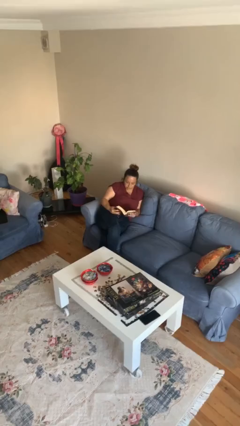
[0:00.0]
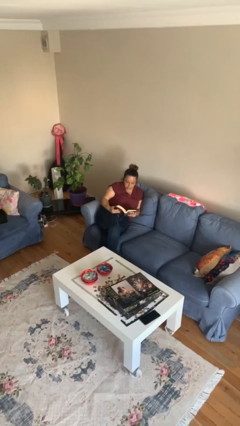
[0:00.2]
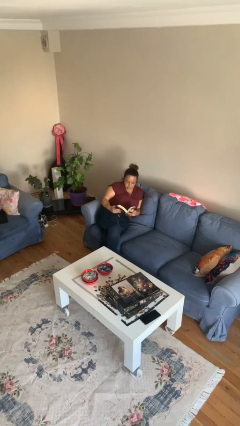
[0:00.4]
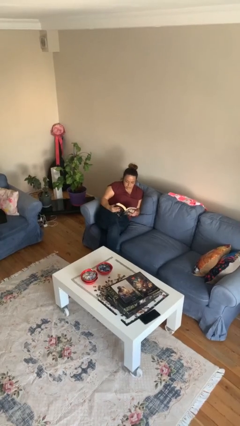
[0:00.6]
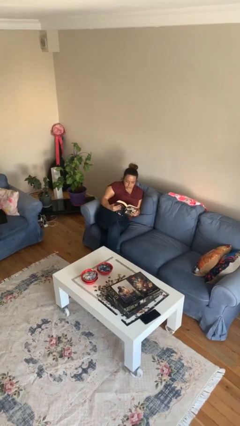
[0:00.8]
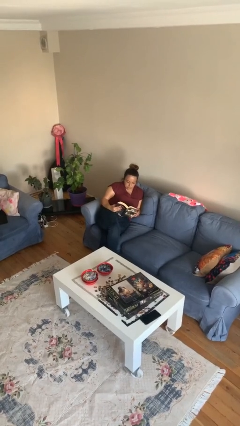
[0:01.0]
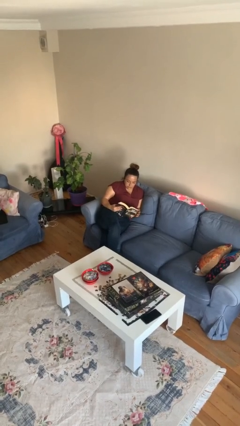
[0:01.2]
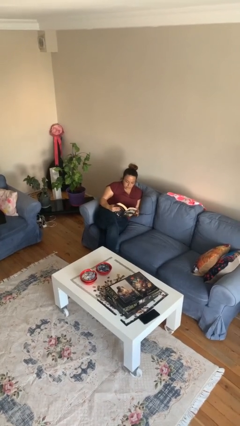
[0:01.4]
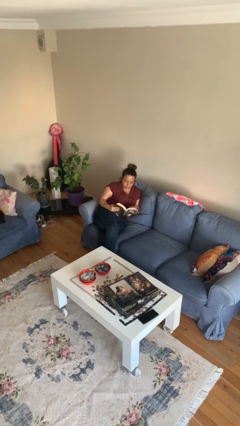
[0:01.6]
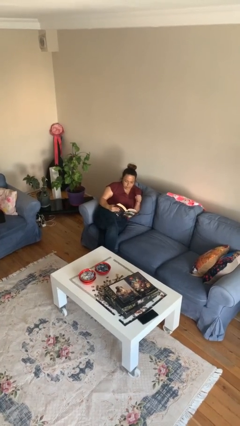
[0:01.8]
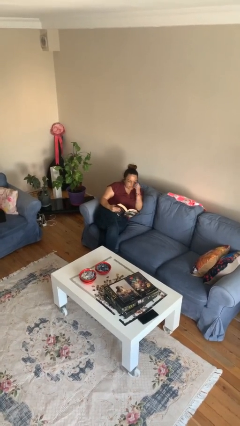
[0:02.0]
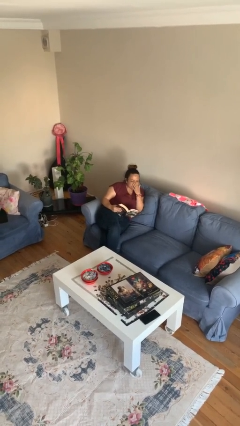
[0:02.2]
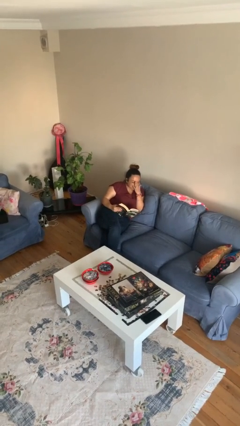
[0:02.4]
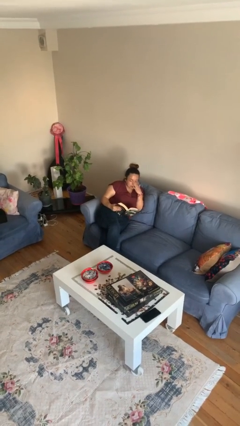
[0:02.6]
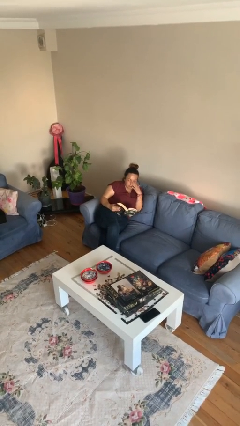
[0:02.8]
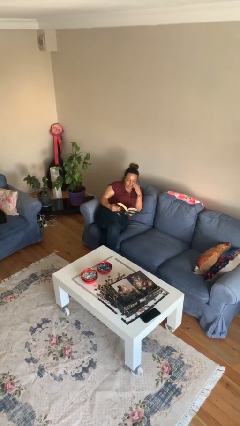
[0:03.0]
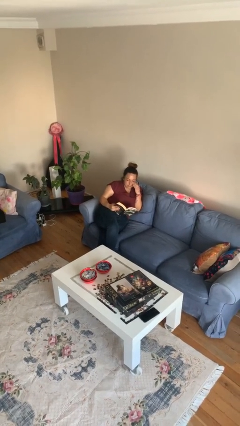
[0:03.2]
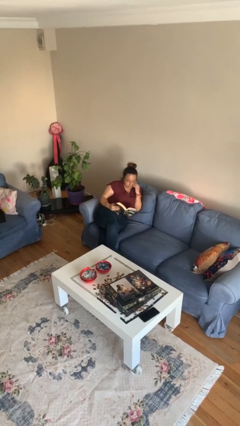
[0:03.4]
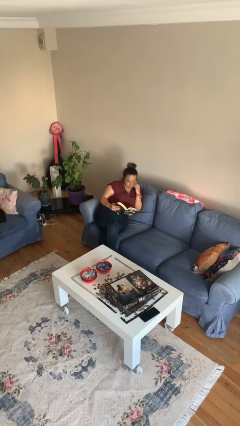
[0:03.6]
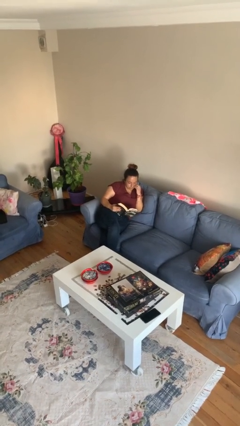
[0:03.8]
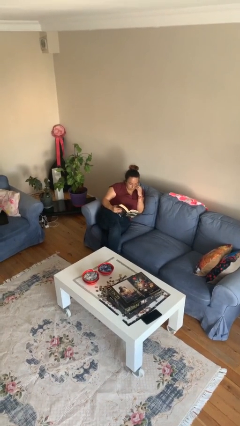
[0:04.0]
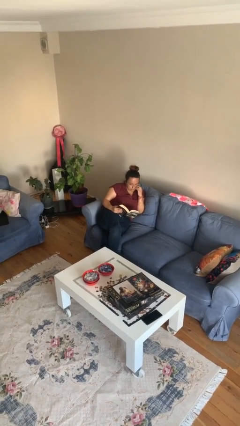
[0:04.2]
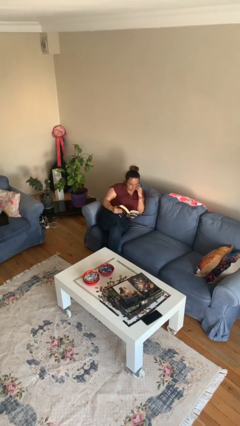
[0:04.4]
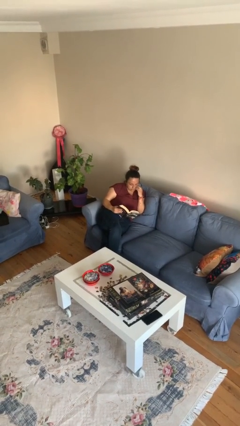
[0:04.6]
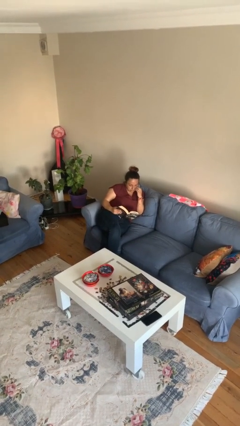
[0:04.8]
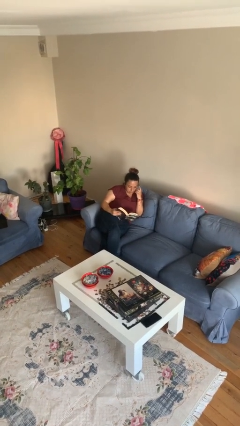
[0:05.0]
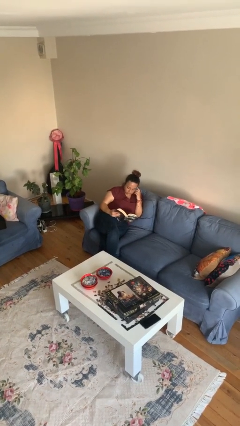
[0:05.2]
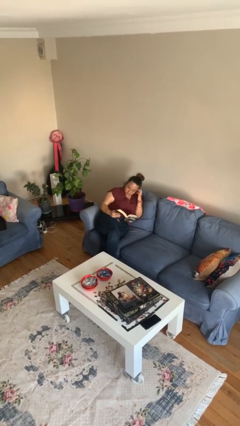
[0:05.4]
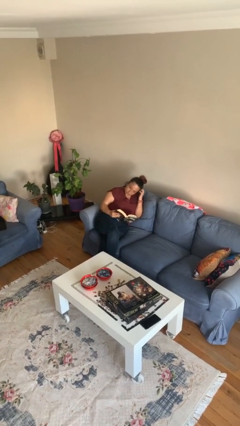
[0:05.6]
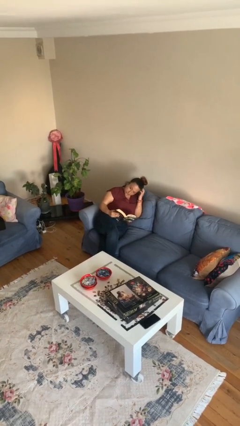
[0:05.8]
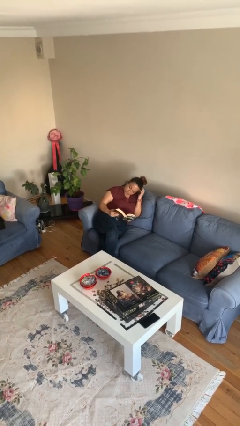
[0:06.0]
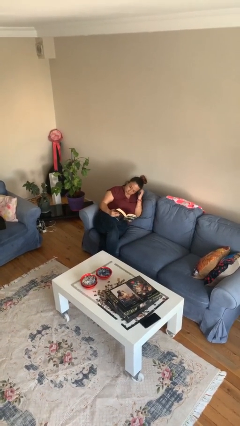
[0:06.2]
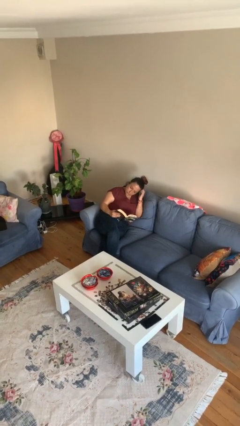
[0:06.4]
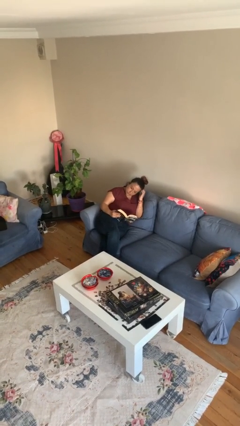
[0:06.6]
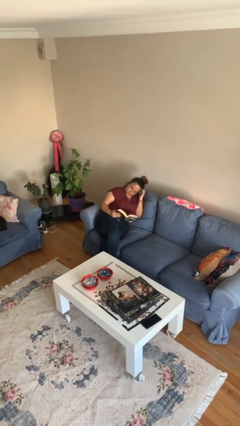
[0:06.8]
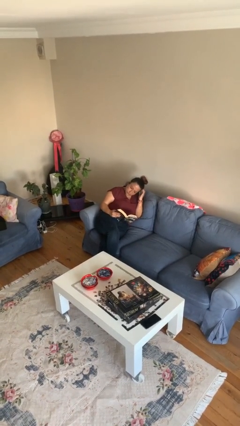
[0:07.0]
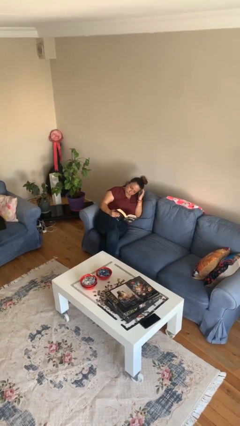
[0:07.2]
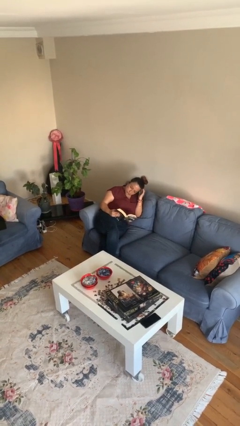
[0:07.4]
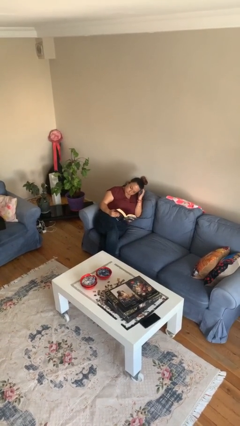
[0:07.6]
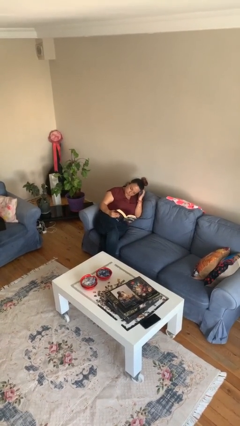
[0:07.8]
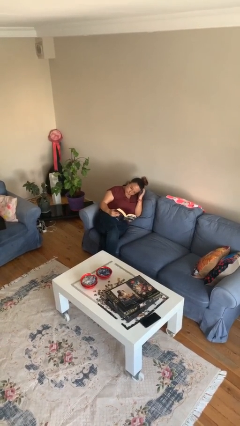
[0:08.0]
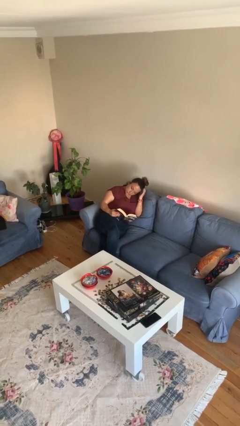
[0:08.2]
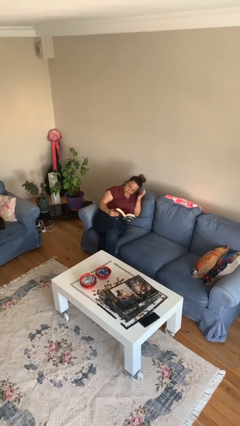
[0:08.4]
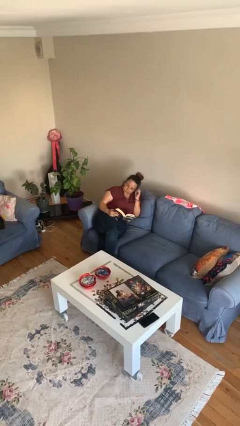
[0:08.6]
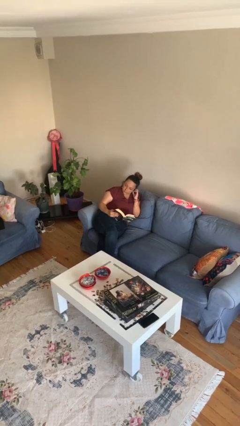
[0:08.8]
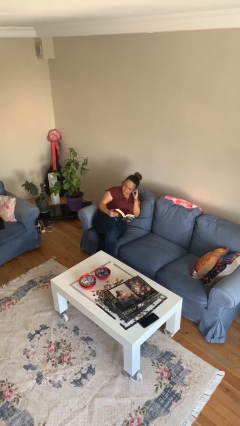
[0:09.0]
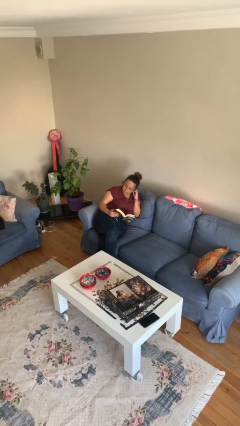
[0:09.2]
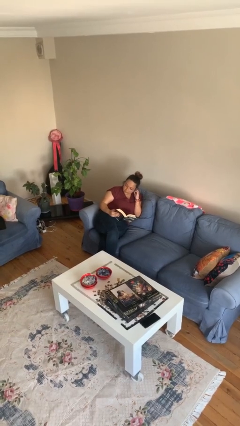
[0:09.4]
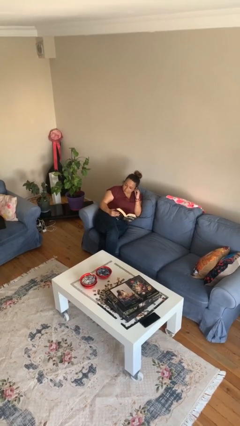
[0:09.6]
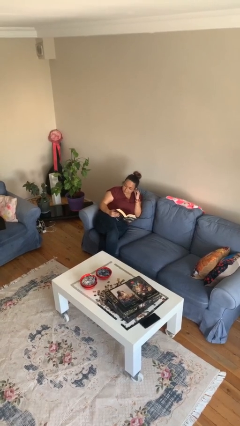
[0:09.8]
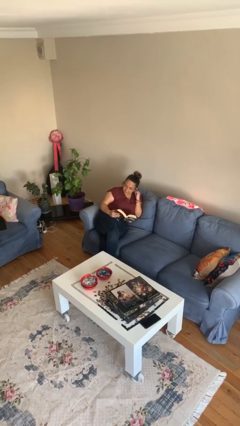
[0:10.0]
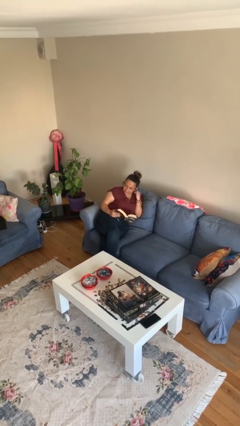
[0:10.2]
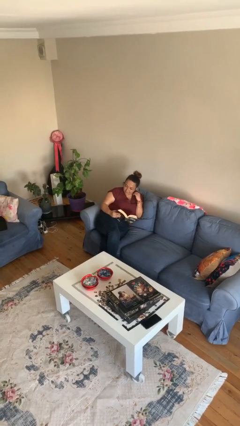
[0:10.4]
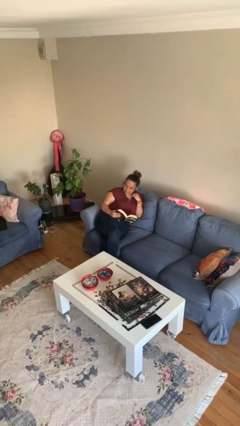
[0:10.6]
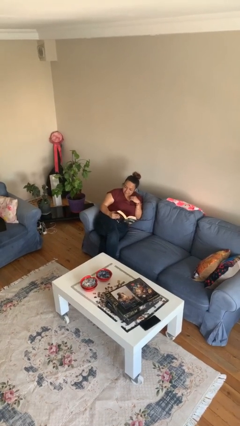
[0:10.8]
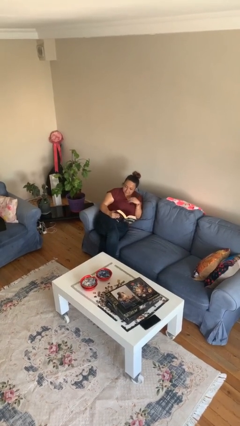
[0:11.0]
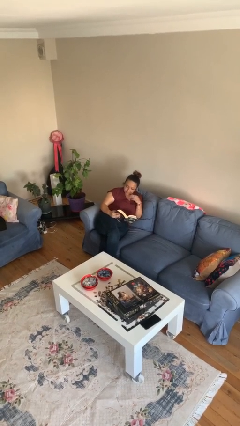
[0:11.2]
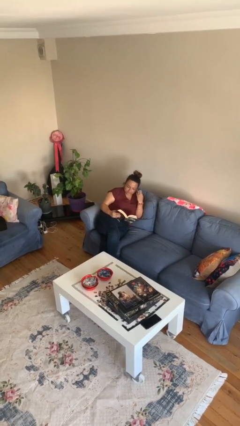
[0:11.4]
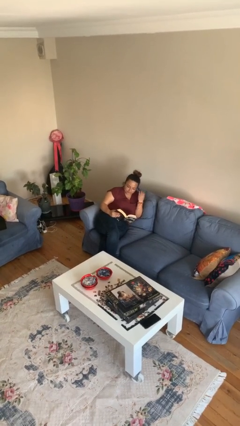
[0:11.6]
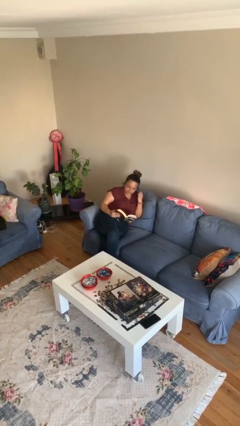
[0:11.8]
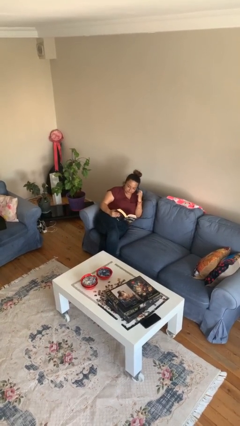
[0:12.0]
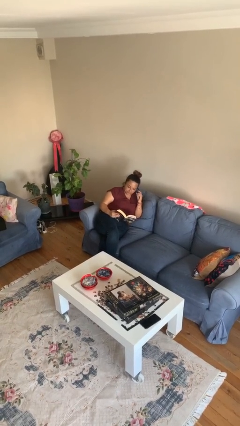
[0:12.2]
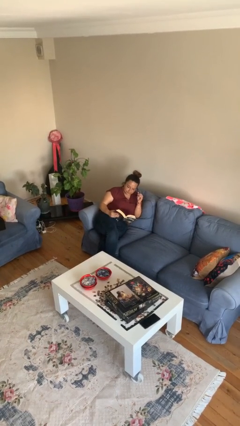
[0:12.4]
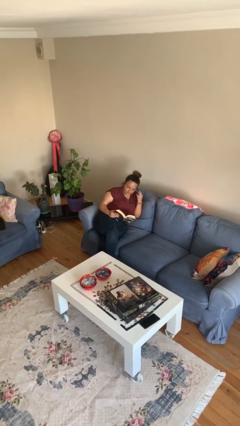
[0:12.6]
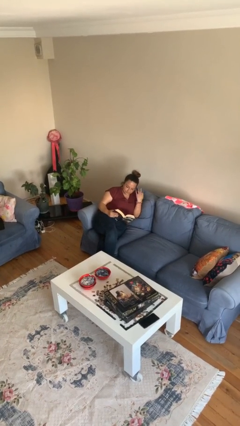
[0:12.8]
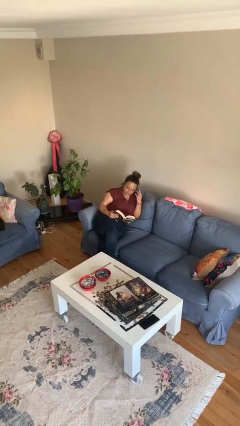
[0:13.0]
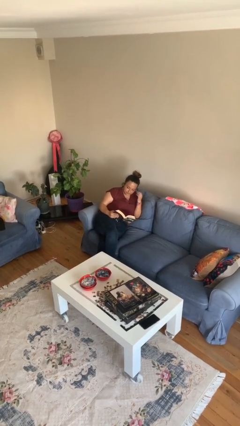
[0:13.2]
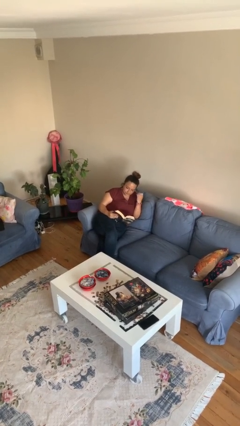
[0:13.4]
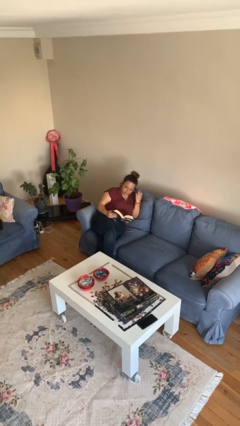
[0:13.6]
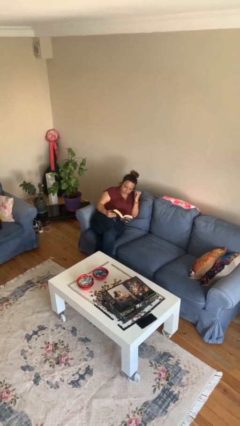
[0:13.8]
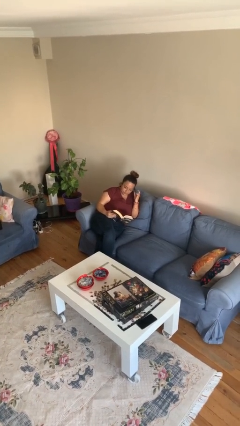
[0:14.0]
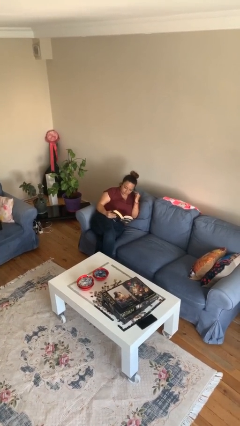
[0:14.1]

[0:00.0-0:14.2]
person reads document

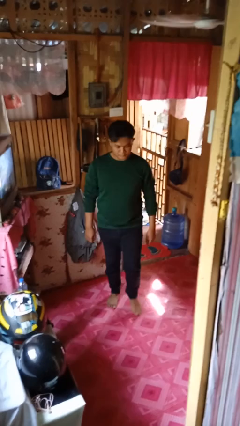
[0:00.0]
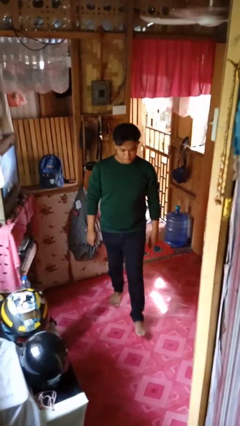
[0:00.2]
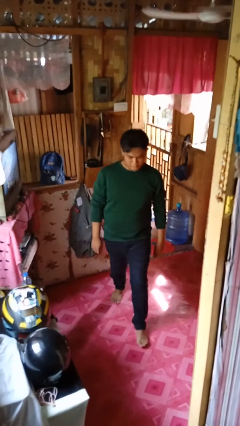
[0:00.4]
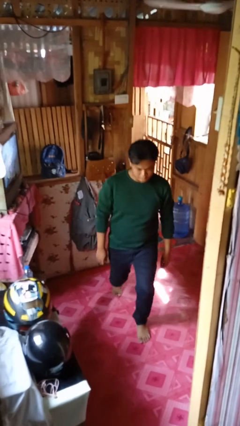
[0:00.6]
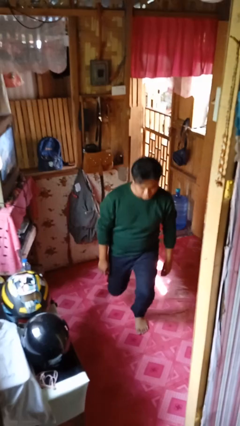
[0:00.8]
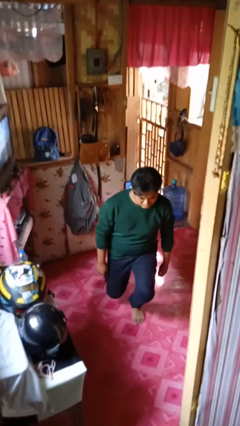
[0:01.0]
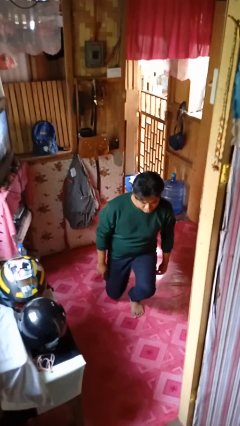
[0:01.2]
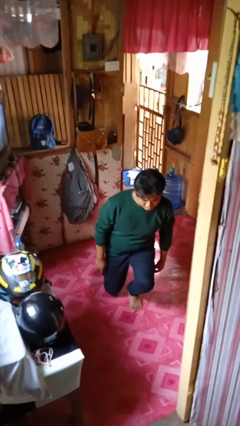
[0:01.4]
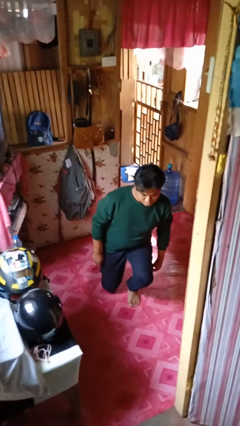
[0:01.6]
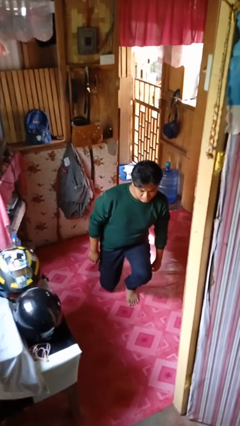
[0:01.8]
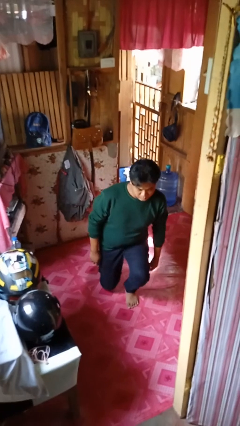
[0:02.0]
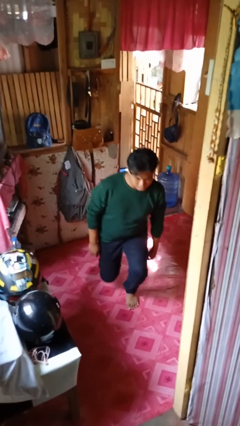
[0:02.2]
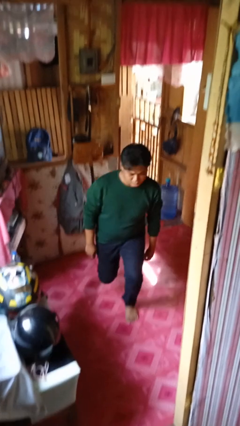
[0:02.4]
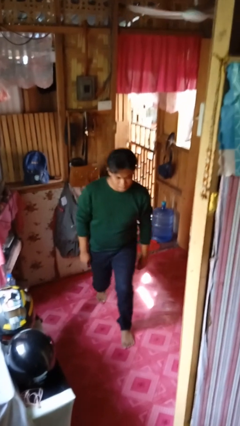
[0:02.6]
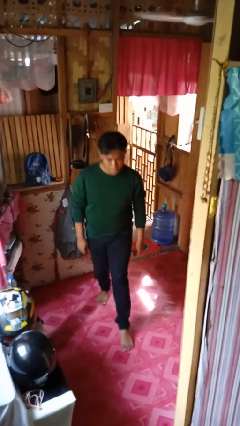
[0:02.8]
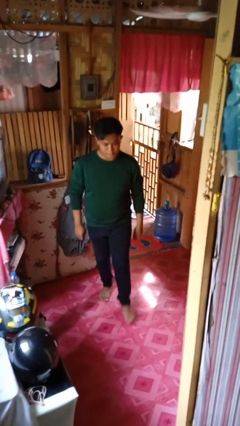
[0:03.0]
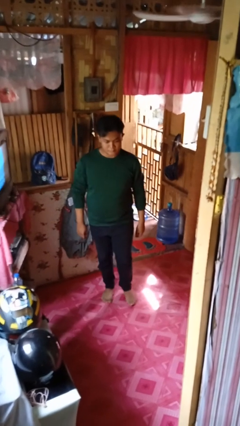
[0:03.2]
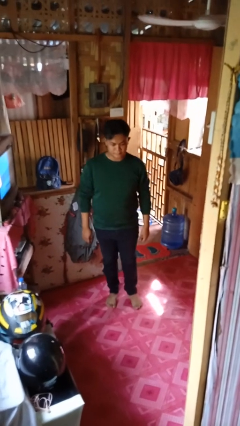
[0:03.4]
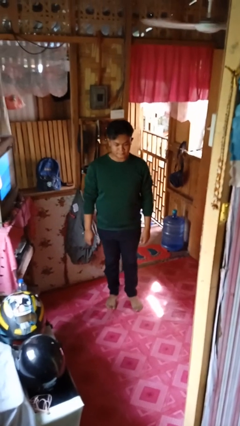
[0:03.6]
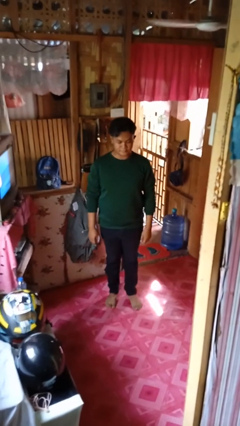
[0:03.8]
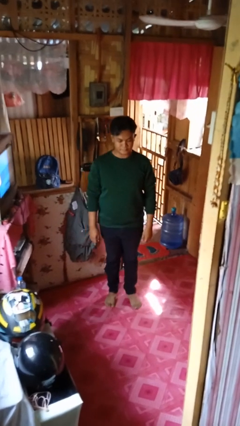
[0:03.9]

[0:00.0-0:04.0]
person exercises with lunges
